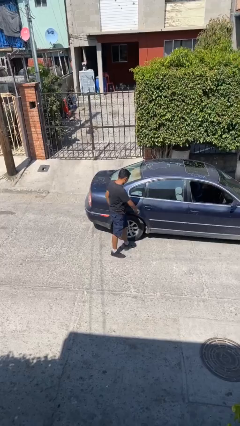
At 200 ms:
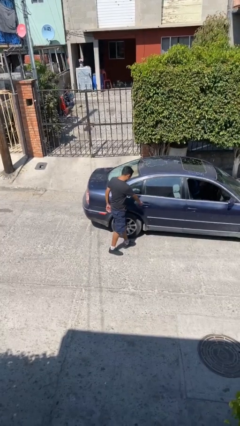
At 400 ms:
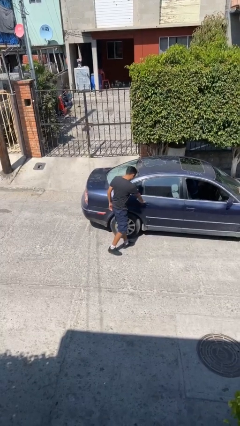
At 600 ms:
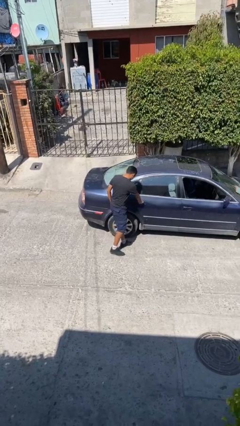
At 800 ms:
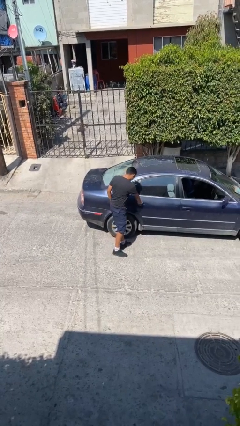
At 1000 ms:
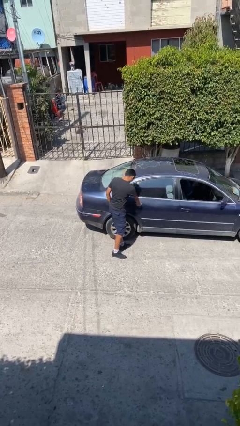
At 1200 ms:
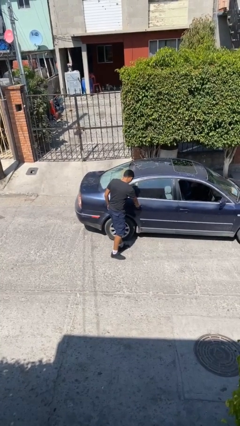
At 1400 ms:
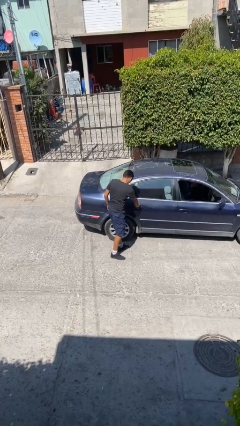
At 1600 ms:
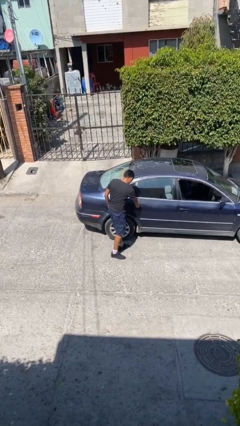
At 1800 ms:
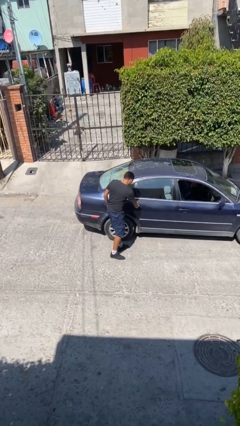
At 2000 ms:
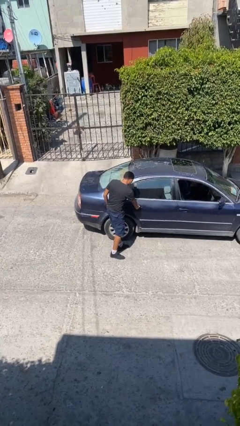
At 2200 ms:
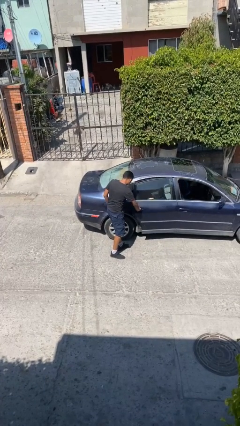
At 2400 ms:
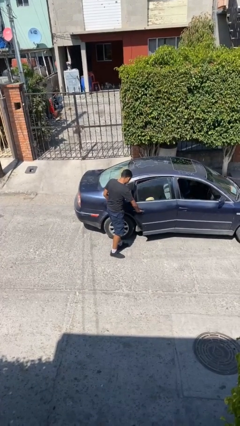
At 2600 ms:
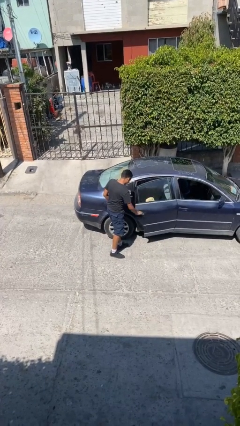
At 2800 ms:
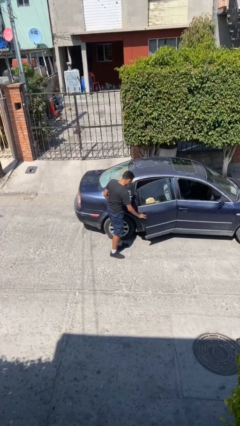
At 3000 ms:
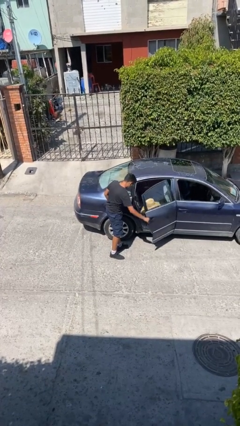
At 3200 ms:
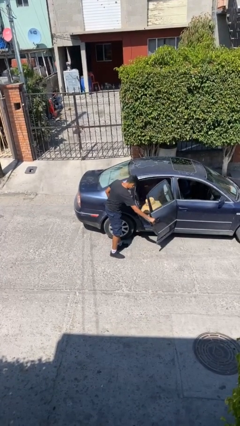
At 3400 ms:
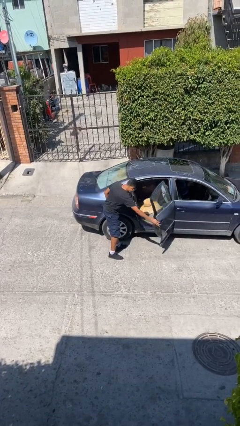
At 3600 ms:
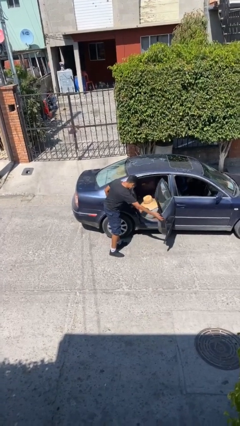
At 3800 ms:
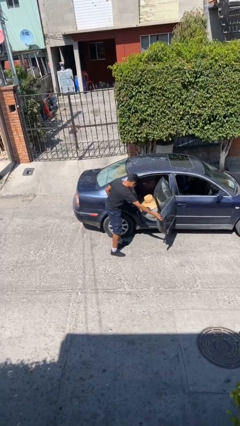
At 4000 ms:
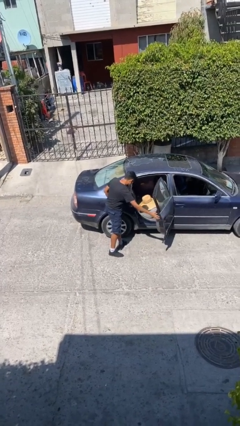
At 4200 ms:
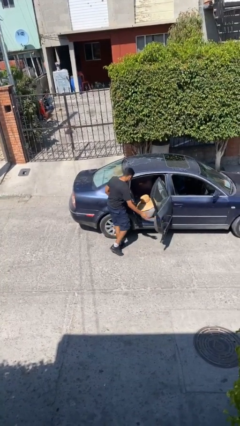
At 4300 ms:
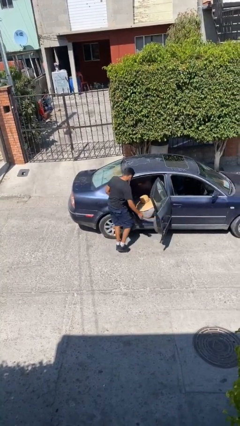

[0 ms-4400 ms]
person opens car door

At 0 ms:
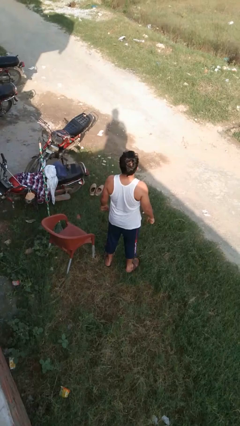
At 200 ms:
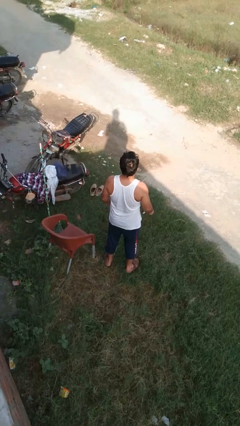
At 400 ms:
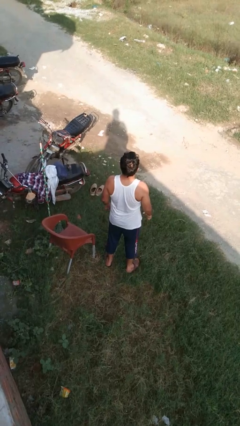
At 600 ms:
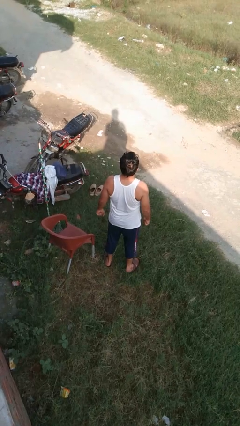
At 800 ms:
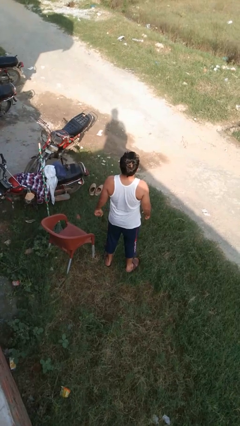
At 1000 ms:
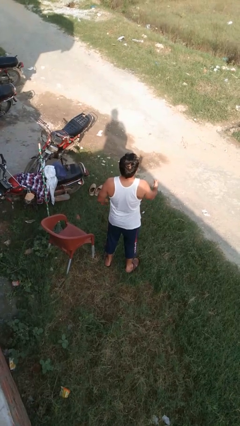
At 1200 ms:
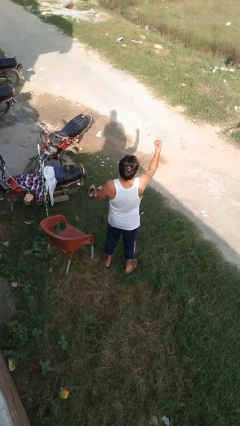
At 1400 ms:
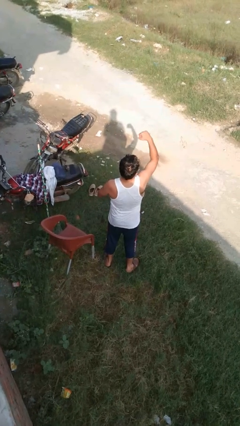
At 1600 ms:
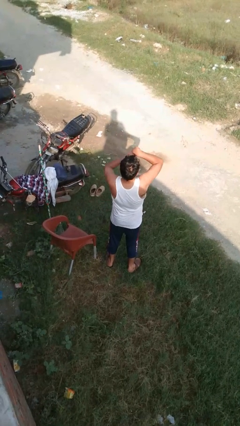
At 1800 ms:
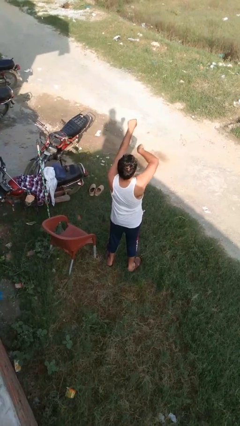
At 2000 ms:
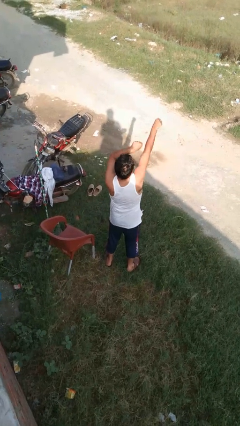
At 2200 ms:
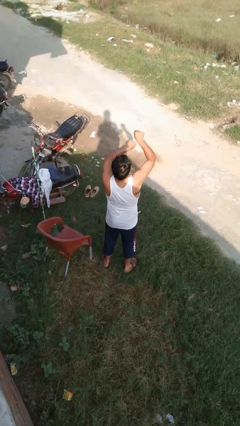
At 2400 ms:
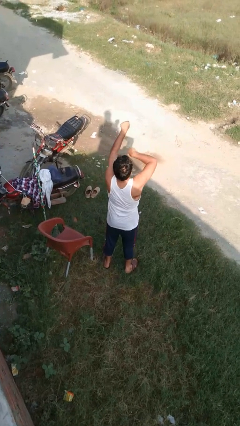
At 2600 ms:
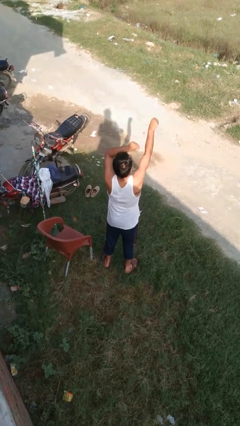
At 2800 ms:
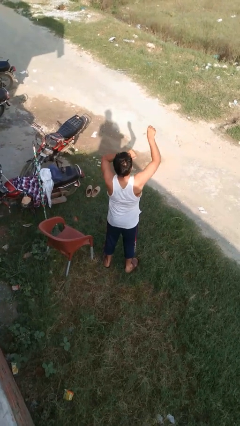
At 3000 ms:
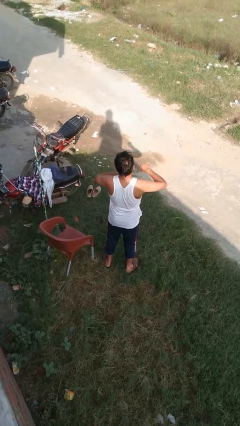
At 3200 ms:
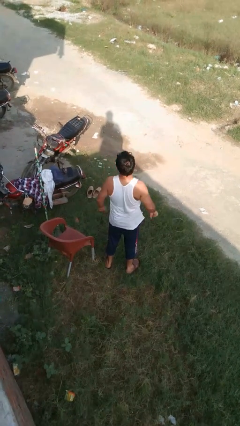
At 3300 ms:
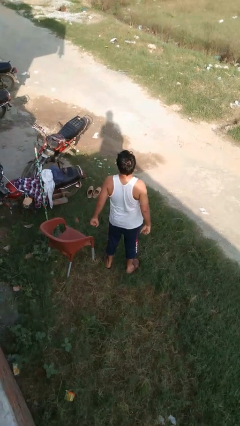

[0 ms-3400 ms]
person punches

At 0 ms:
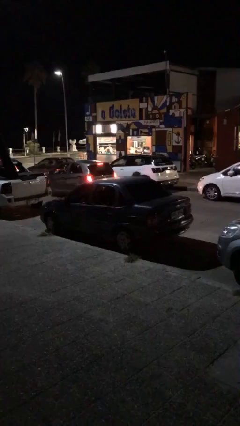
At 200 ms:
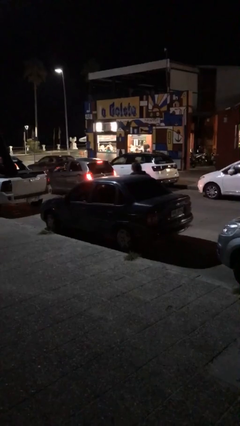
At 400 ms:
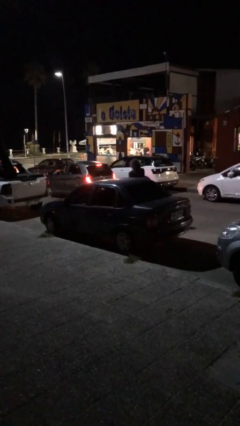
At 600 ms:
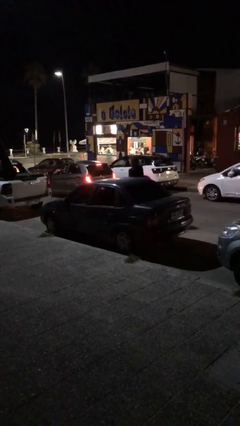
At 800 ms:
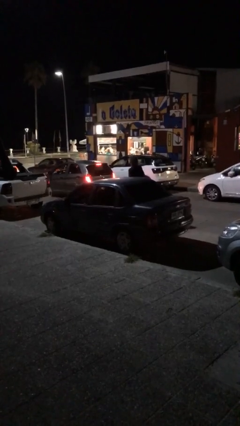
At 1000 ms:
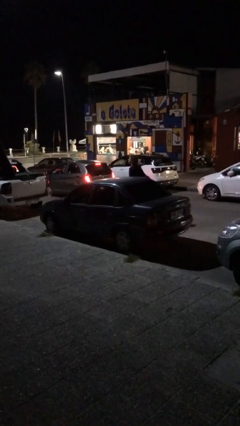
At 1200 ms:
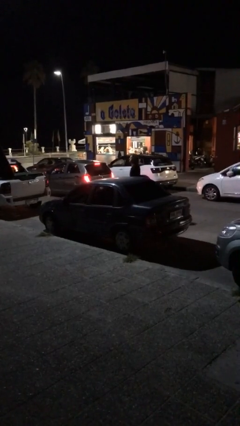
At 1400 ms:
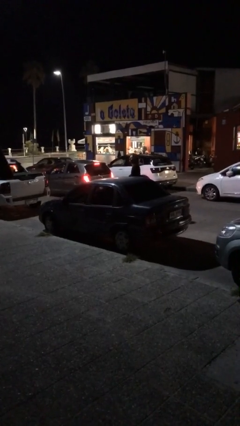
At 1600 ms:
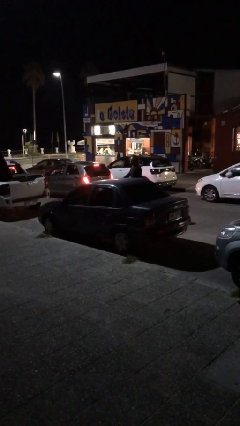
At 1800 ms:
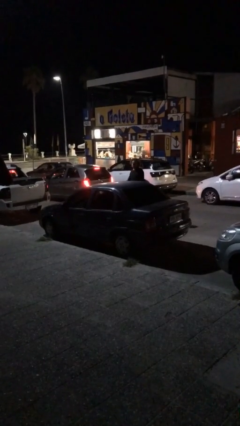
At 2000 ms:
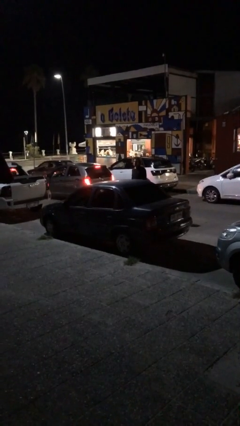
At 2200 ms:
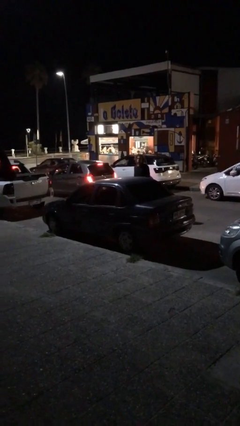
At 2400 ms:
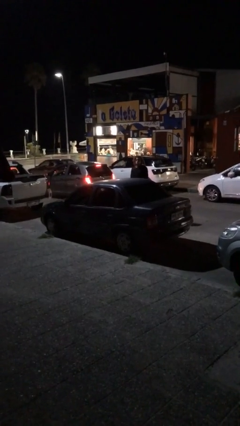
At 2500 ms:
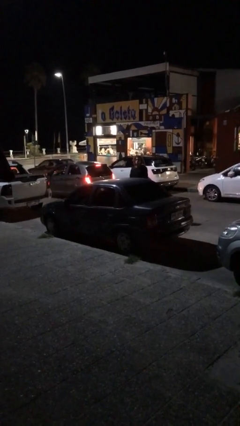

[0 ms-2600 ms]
car drops off person

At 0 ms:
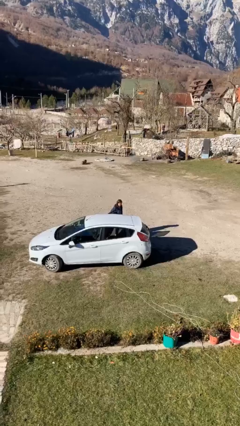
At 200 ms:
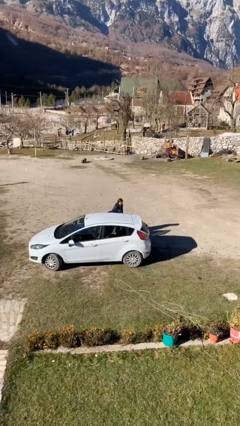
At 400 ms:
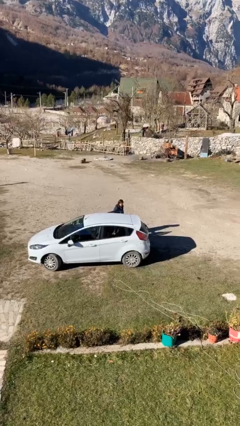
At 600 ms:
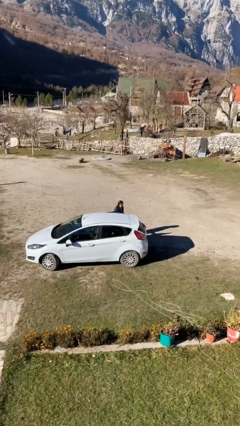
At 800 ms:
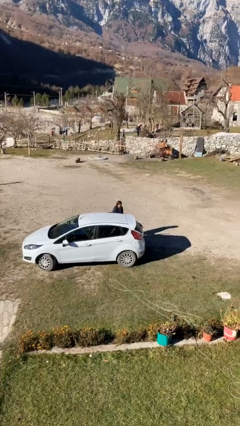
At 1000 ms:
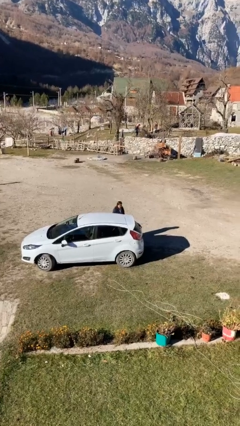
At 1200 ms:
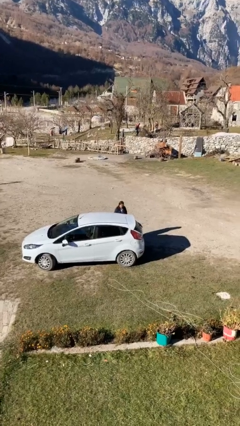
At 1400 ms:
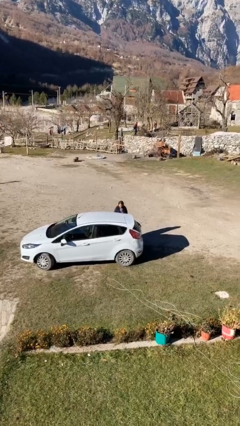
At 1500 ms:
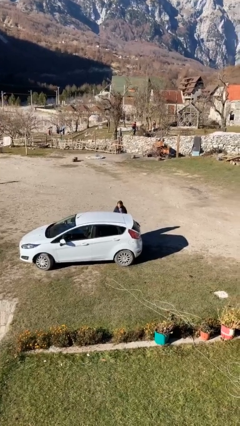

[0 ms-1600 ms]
person closes car door

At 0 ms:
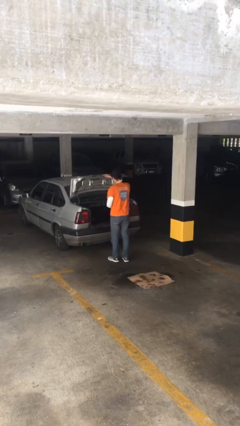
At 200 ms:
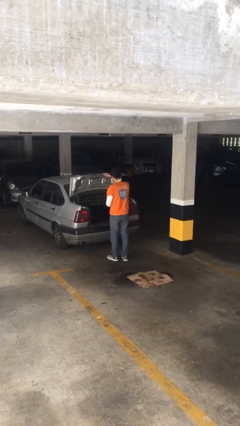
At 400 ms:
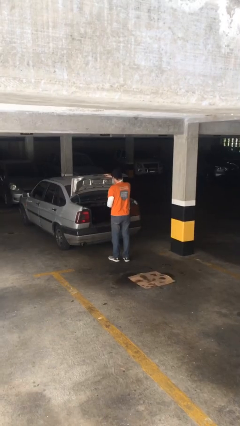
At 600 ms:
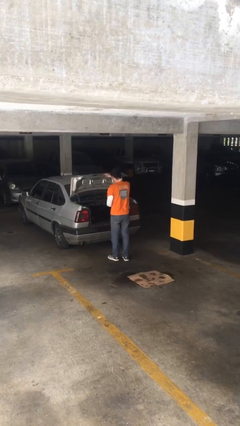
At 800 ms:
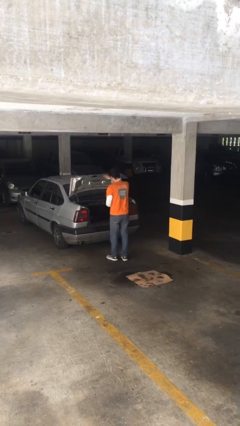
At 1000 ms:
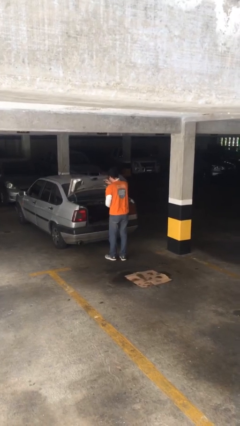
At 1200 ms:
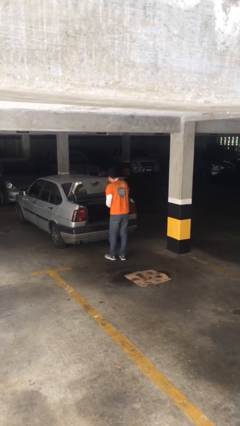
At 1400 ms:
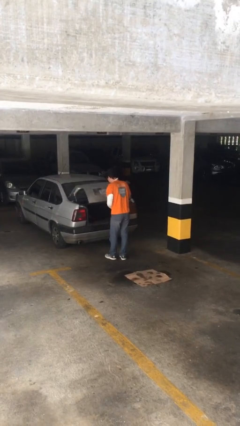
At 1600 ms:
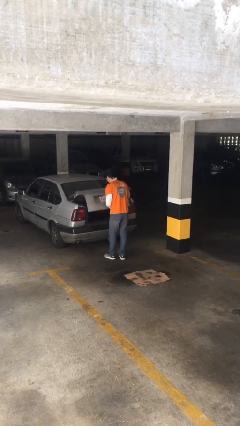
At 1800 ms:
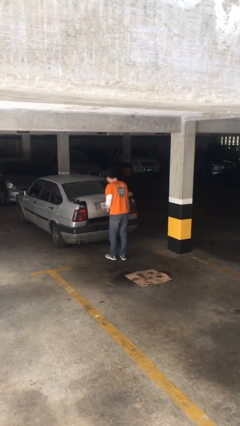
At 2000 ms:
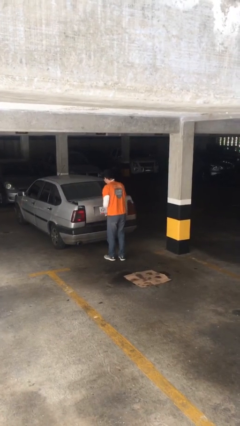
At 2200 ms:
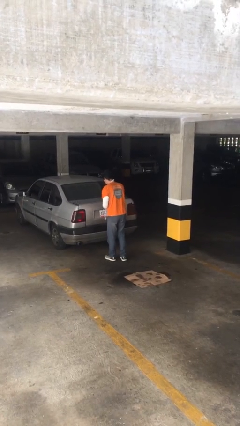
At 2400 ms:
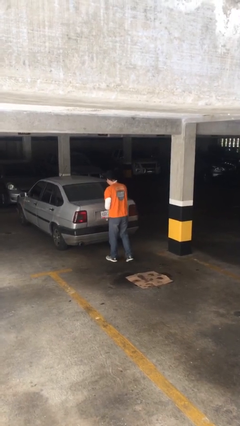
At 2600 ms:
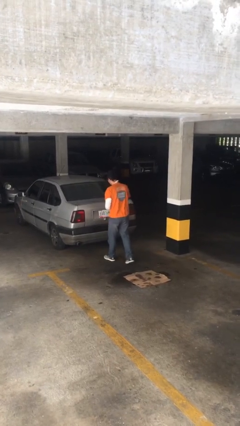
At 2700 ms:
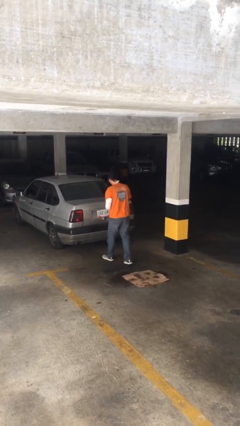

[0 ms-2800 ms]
person closes car trunk

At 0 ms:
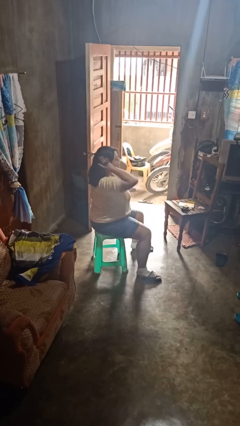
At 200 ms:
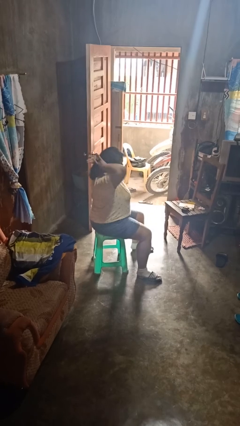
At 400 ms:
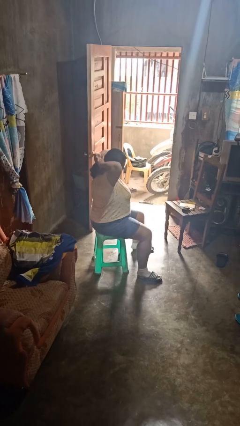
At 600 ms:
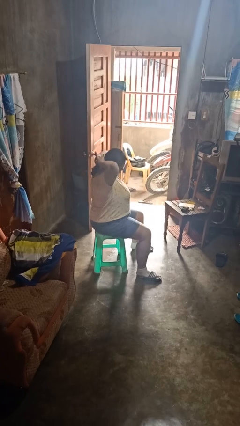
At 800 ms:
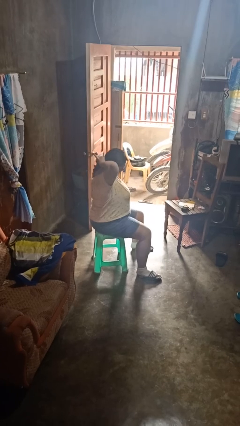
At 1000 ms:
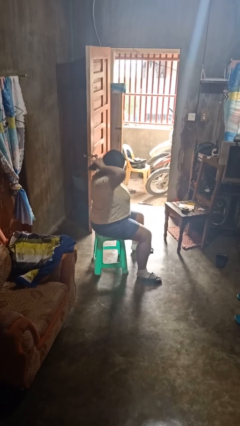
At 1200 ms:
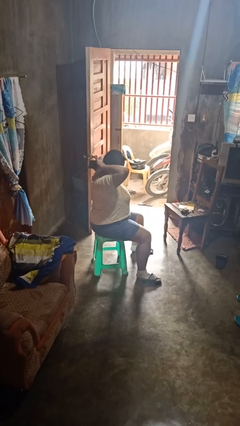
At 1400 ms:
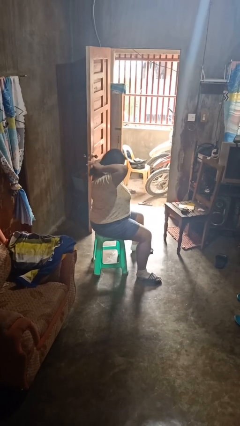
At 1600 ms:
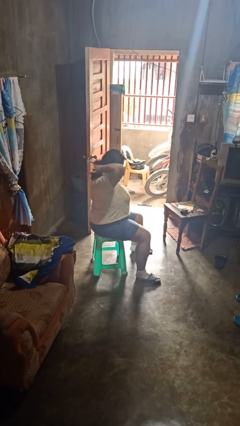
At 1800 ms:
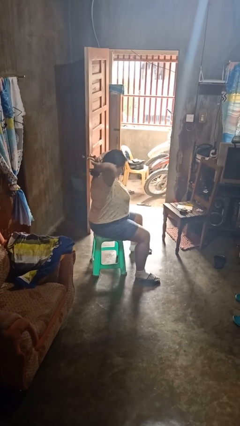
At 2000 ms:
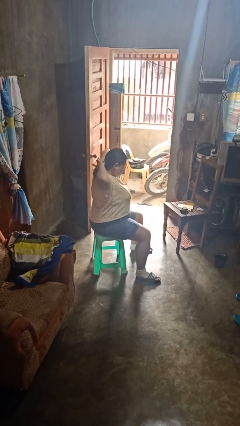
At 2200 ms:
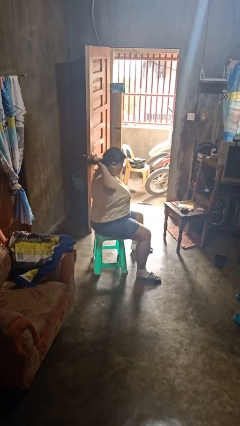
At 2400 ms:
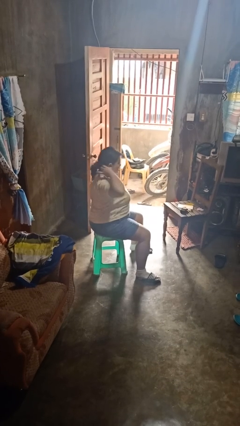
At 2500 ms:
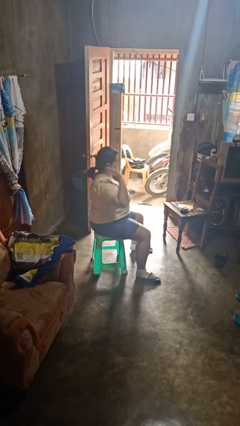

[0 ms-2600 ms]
person puts hair in ponytail
